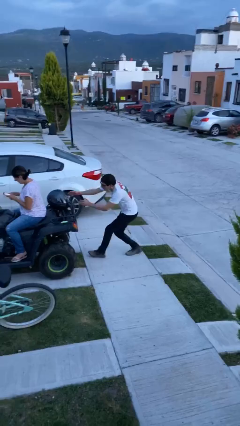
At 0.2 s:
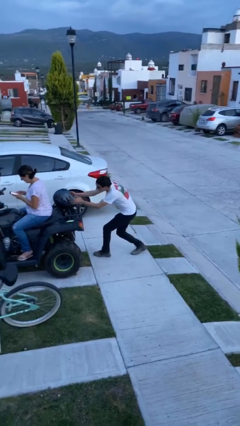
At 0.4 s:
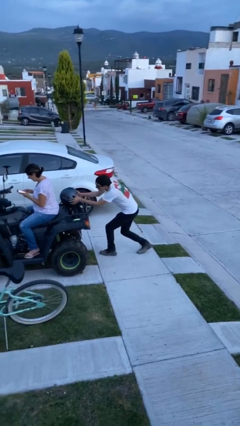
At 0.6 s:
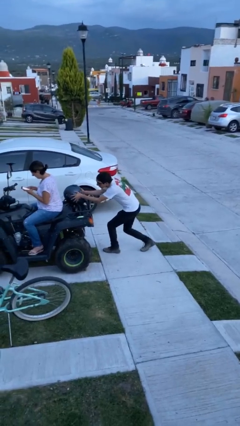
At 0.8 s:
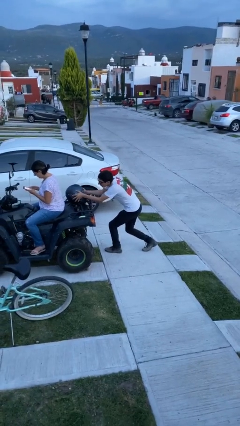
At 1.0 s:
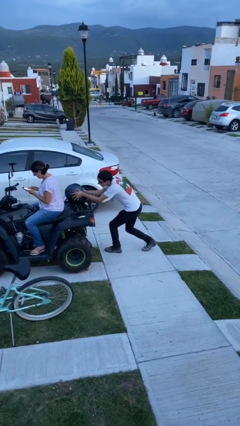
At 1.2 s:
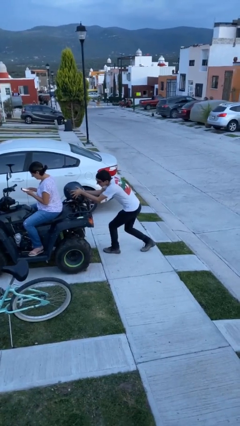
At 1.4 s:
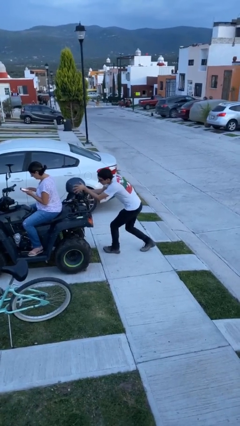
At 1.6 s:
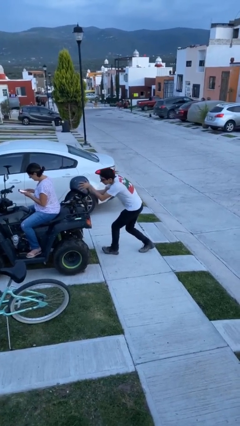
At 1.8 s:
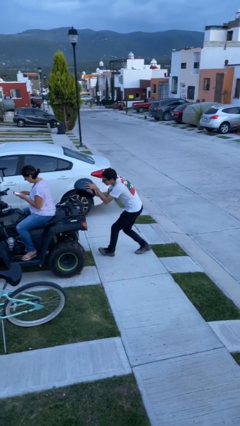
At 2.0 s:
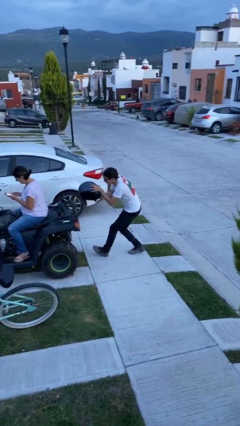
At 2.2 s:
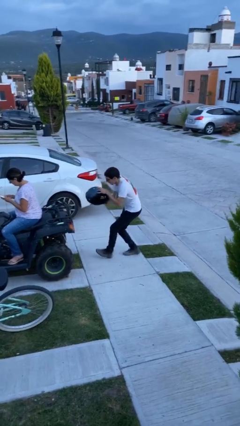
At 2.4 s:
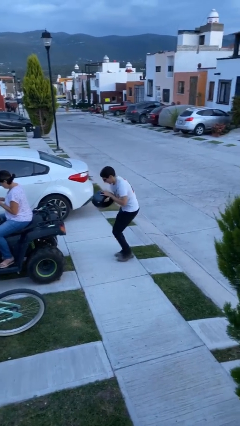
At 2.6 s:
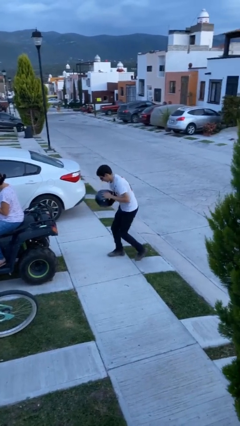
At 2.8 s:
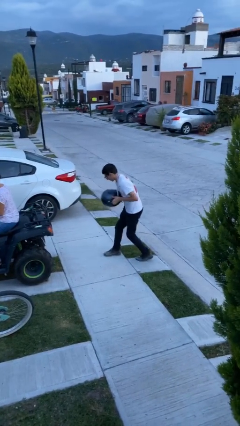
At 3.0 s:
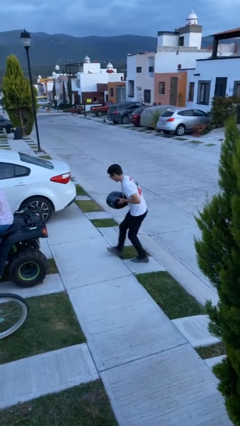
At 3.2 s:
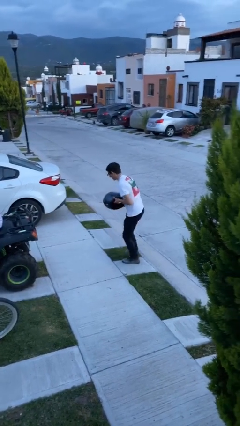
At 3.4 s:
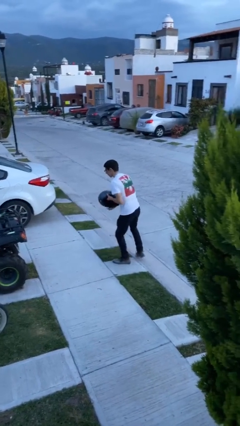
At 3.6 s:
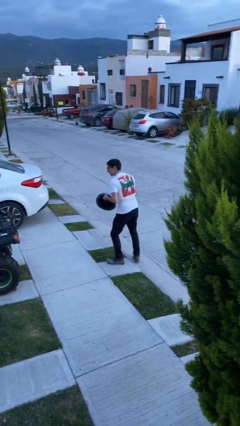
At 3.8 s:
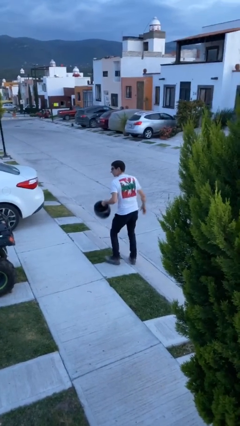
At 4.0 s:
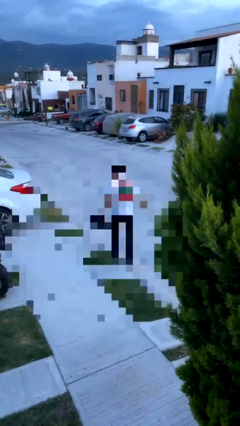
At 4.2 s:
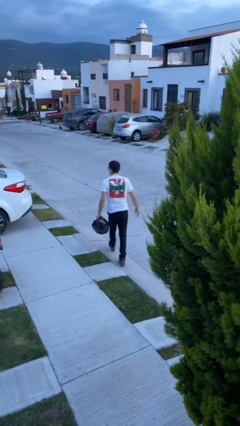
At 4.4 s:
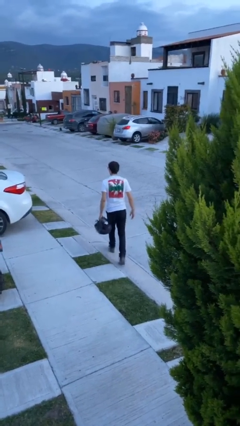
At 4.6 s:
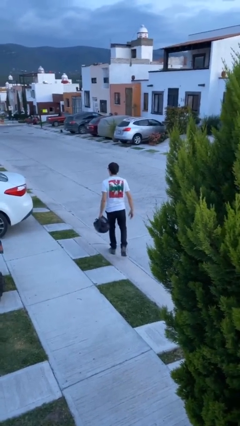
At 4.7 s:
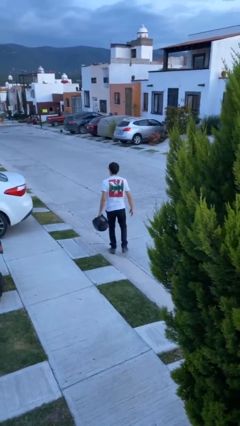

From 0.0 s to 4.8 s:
person steals object from person

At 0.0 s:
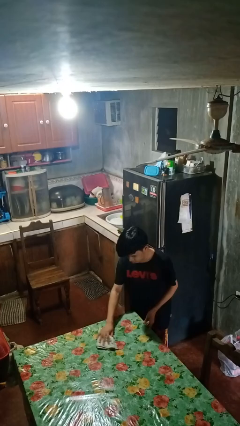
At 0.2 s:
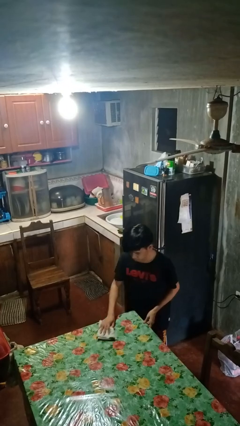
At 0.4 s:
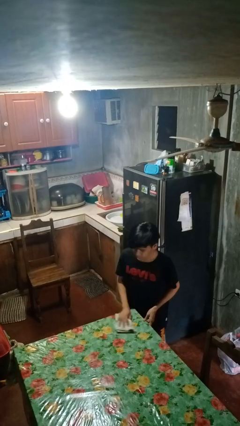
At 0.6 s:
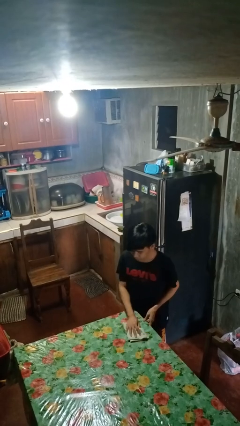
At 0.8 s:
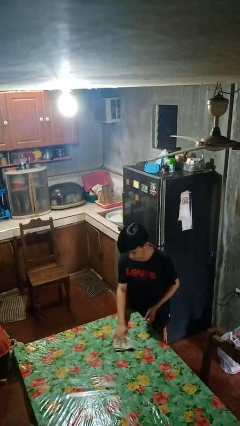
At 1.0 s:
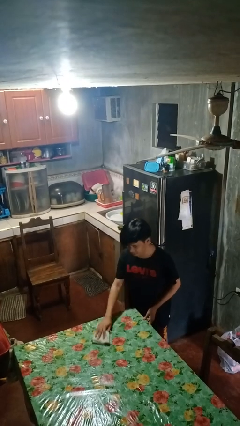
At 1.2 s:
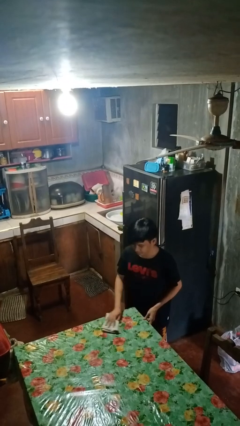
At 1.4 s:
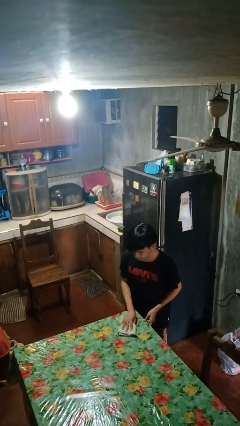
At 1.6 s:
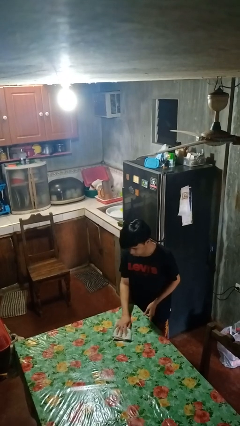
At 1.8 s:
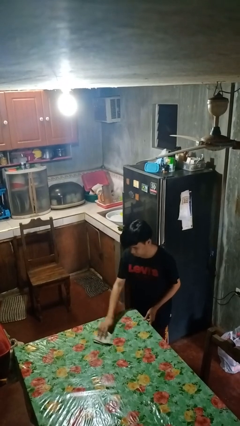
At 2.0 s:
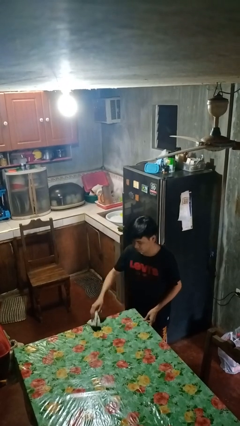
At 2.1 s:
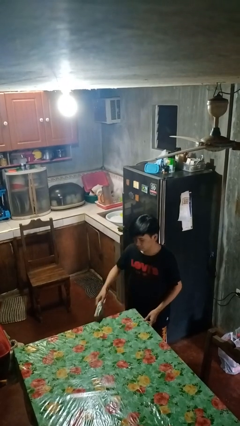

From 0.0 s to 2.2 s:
person cleans table with rag

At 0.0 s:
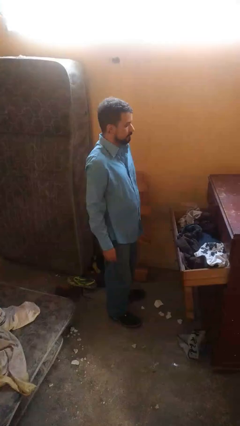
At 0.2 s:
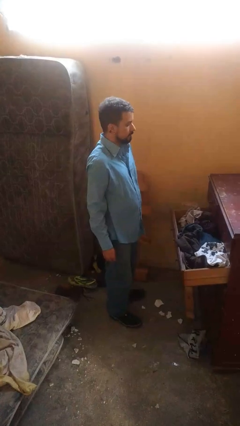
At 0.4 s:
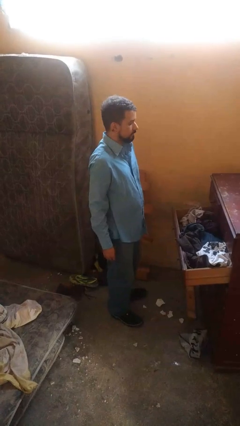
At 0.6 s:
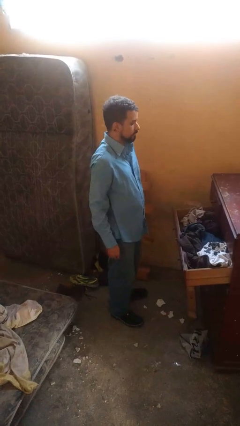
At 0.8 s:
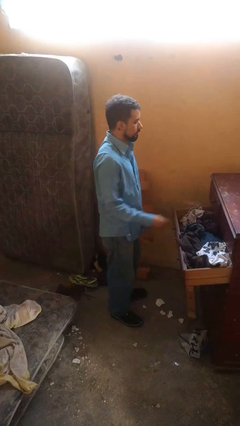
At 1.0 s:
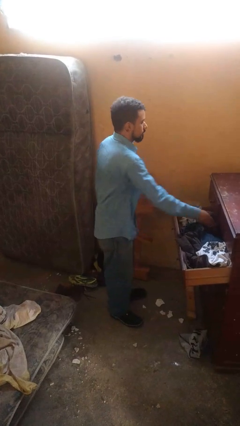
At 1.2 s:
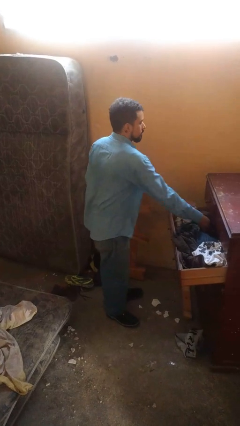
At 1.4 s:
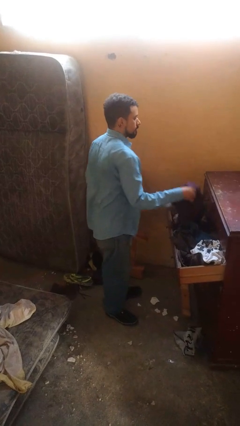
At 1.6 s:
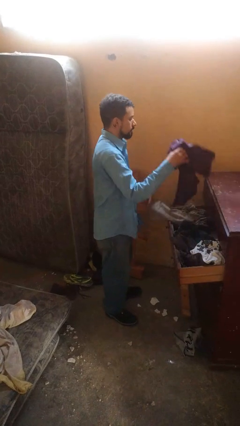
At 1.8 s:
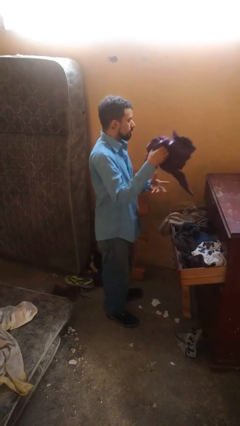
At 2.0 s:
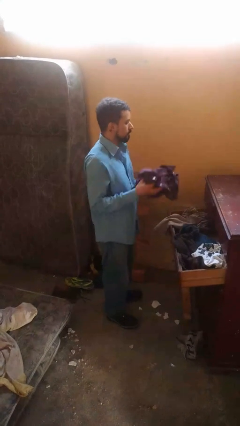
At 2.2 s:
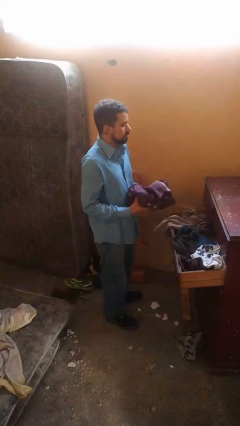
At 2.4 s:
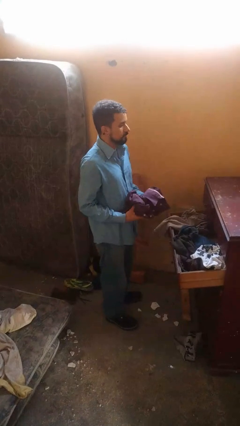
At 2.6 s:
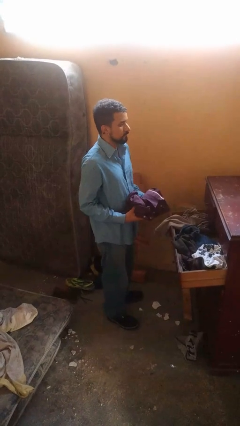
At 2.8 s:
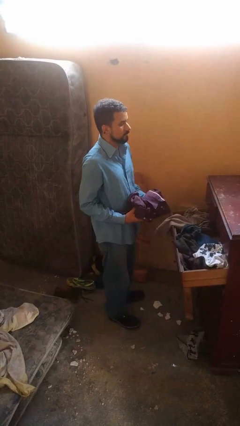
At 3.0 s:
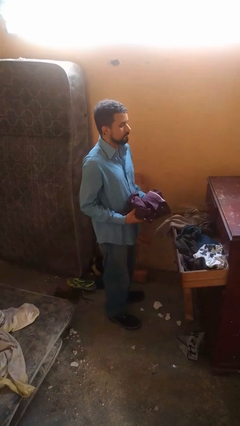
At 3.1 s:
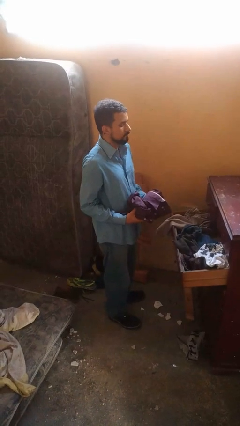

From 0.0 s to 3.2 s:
person takes clothes from dresser

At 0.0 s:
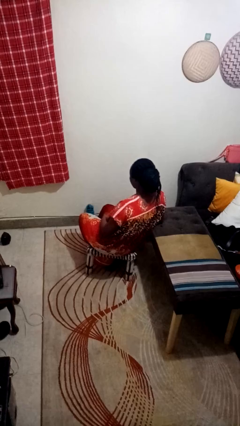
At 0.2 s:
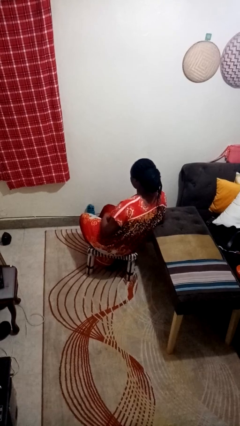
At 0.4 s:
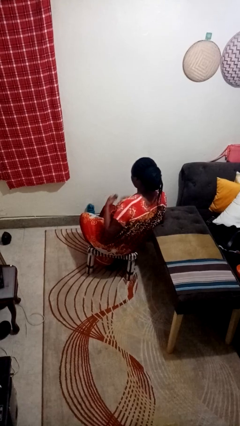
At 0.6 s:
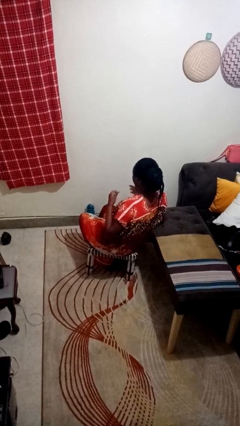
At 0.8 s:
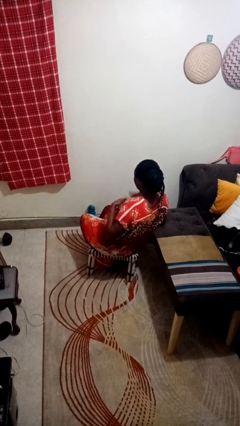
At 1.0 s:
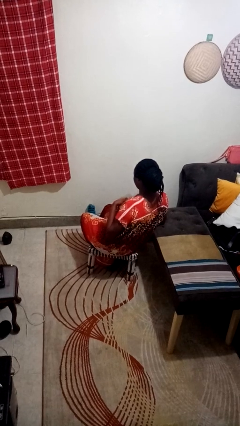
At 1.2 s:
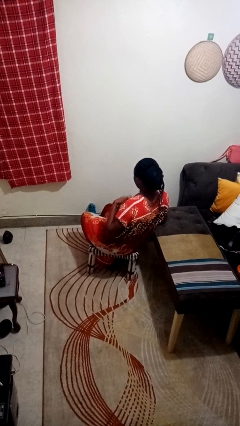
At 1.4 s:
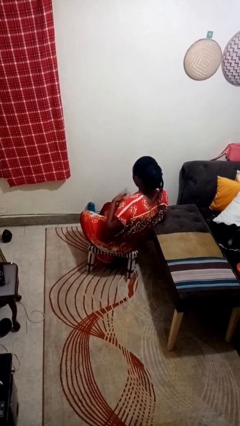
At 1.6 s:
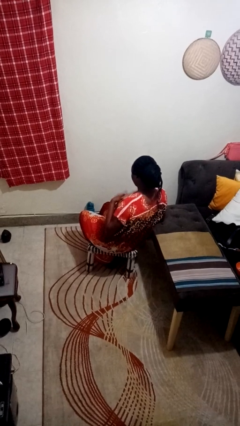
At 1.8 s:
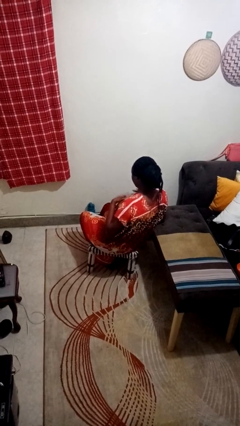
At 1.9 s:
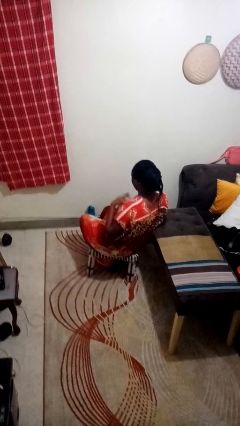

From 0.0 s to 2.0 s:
person drums on chest

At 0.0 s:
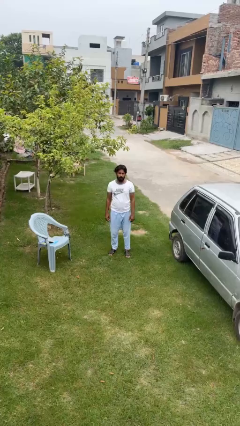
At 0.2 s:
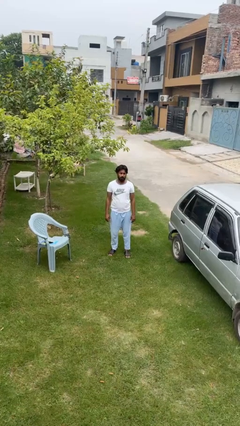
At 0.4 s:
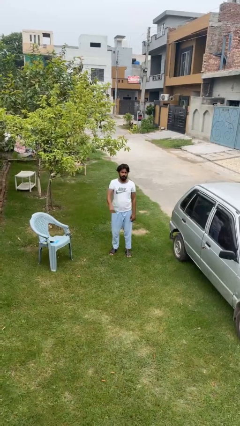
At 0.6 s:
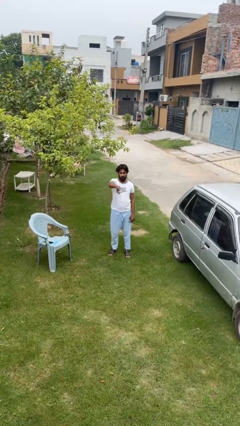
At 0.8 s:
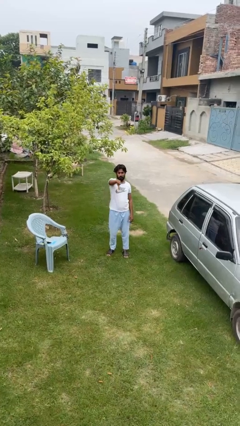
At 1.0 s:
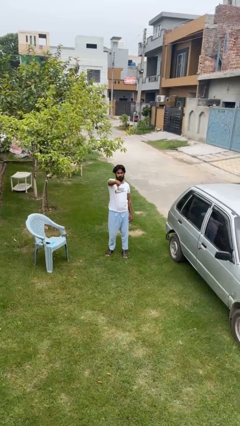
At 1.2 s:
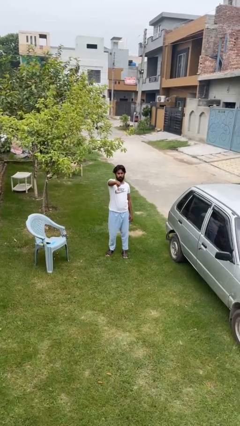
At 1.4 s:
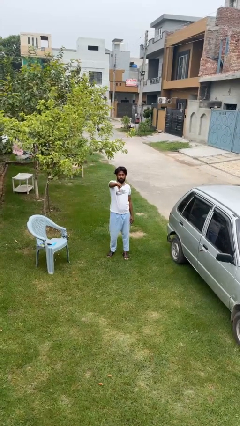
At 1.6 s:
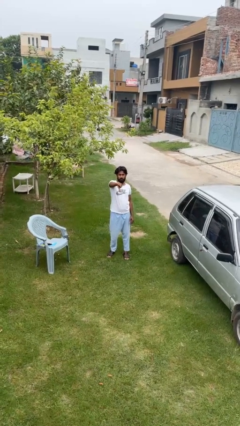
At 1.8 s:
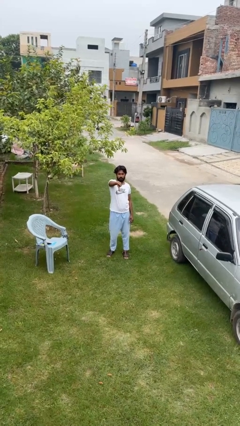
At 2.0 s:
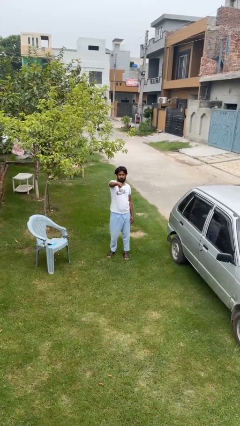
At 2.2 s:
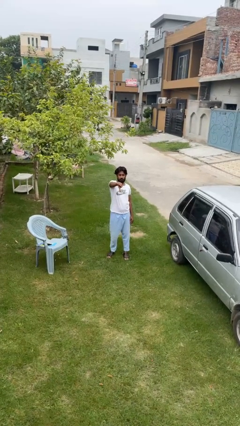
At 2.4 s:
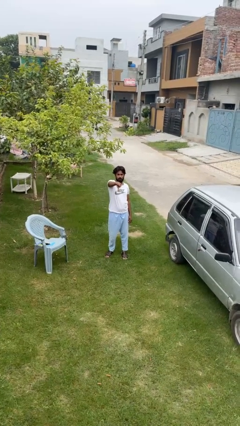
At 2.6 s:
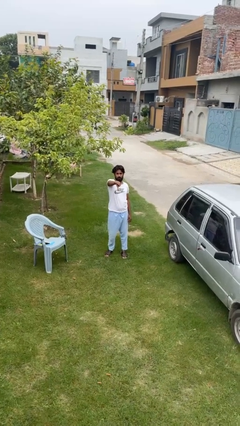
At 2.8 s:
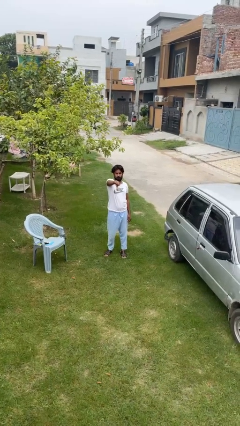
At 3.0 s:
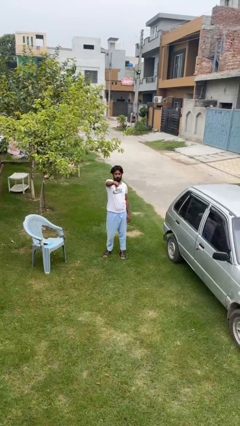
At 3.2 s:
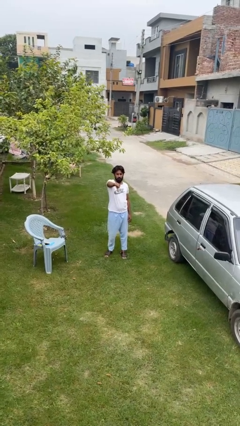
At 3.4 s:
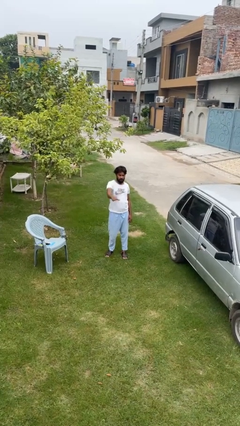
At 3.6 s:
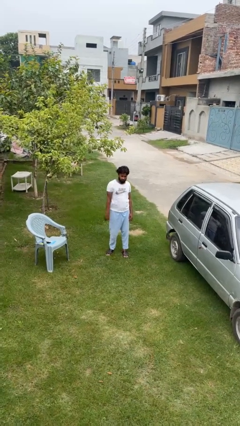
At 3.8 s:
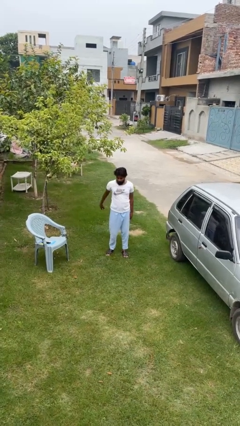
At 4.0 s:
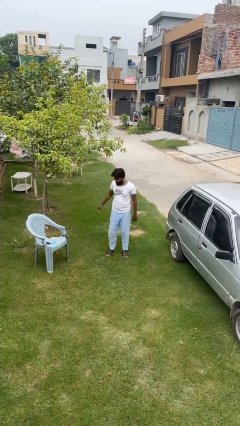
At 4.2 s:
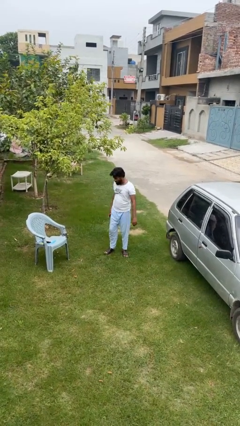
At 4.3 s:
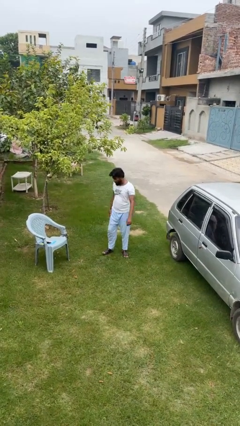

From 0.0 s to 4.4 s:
person gestures thumbs down

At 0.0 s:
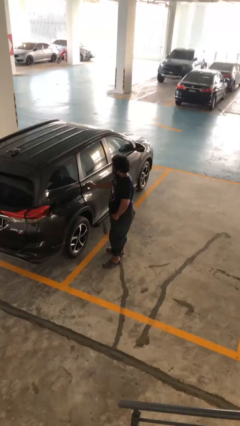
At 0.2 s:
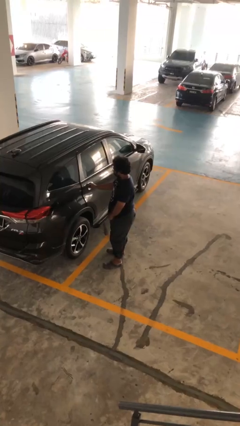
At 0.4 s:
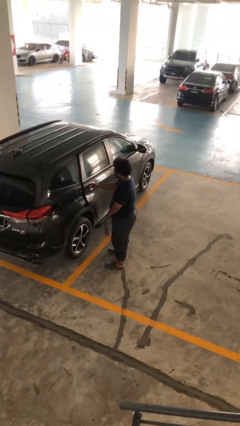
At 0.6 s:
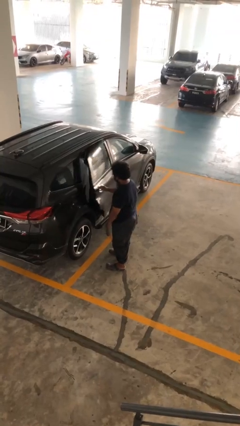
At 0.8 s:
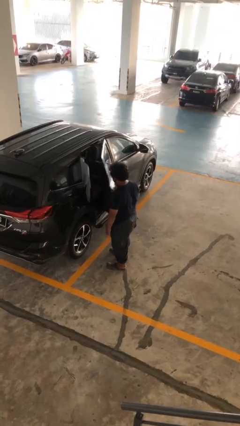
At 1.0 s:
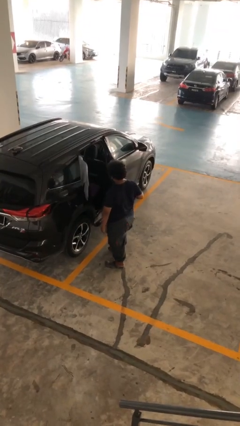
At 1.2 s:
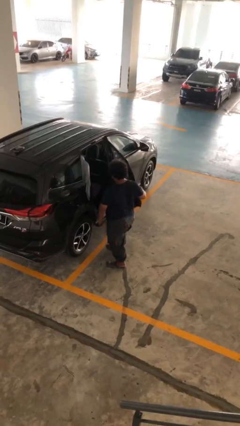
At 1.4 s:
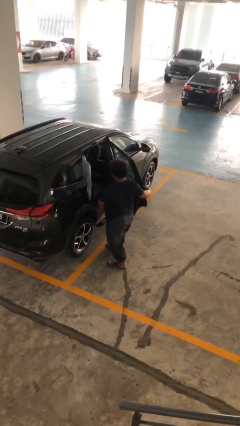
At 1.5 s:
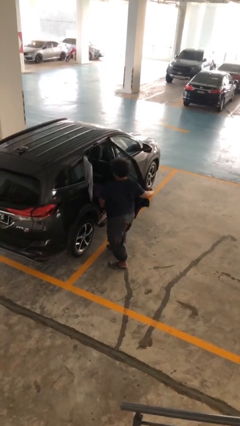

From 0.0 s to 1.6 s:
person opens car door
